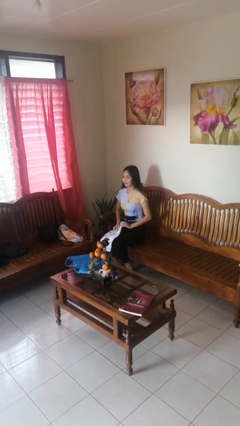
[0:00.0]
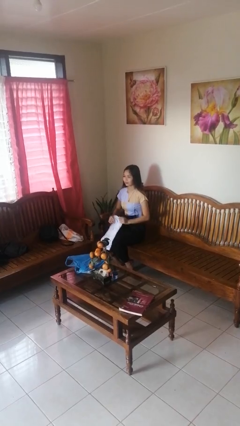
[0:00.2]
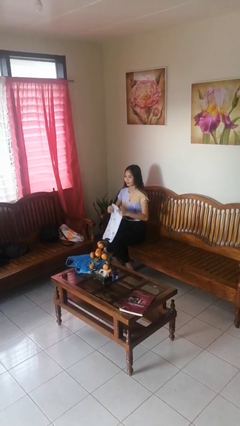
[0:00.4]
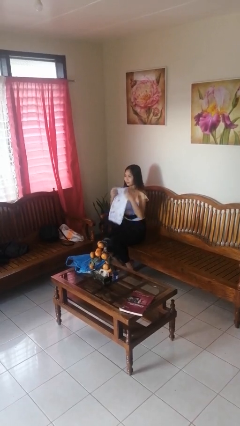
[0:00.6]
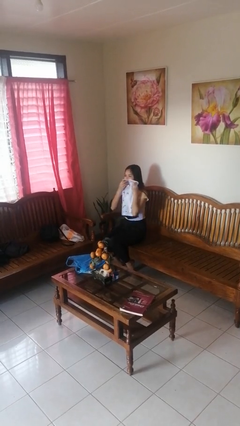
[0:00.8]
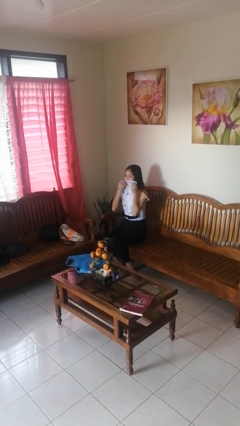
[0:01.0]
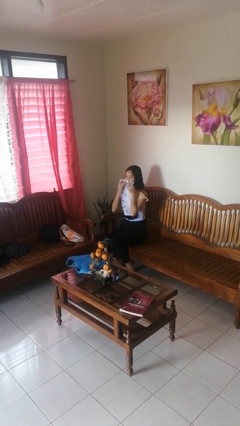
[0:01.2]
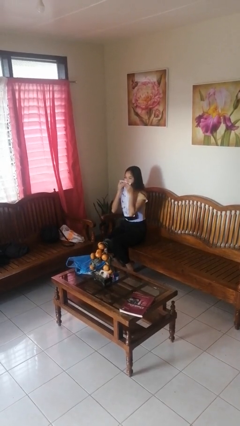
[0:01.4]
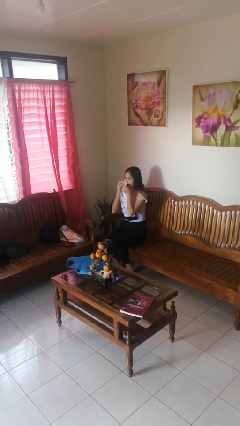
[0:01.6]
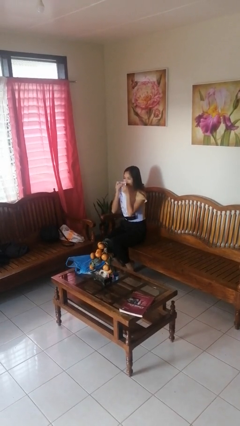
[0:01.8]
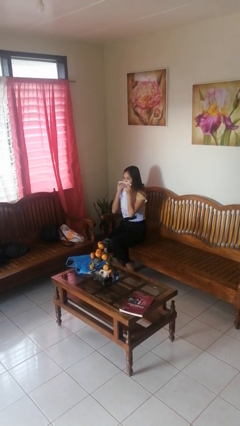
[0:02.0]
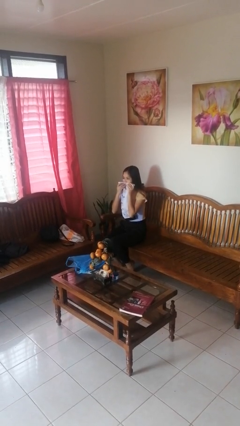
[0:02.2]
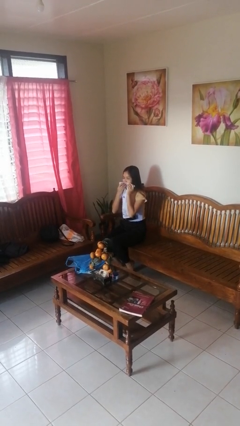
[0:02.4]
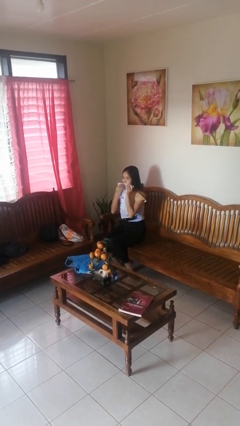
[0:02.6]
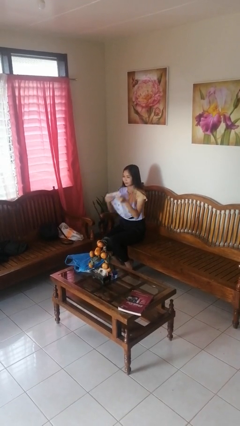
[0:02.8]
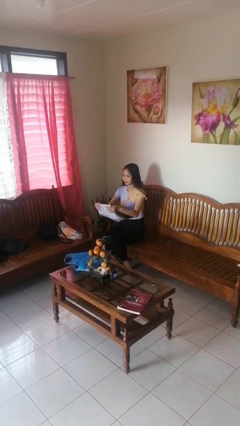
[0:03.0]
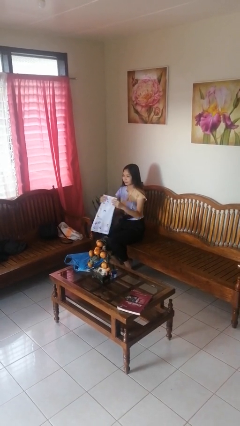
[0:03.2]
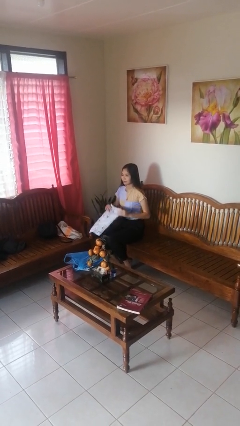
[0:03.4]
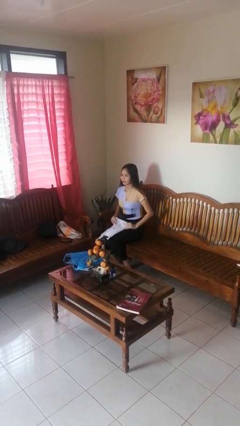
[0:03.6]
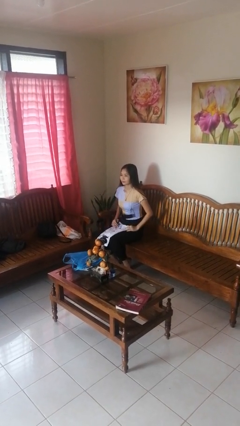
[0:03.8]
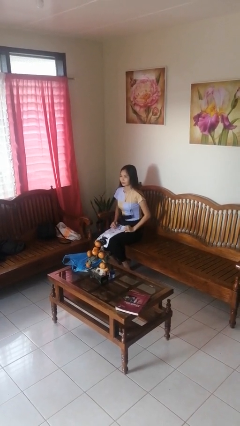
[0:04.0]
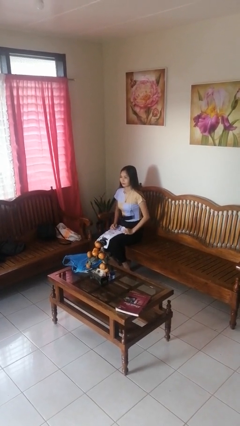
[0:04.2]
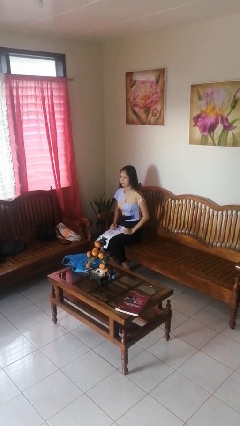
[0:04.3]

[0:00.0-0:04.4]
person wipes mouth with napkin

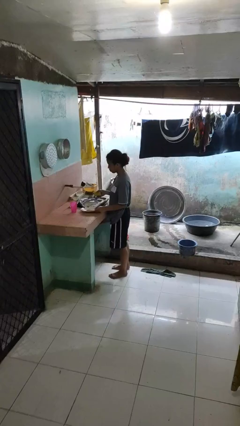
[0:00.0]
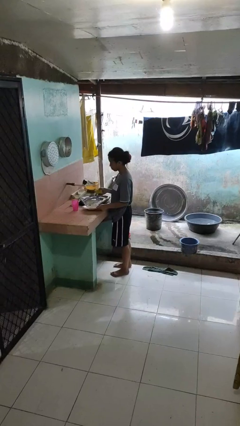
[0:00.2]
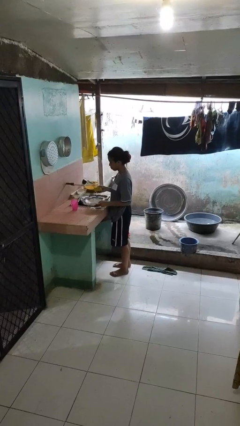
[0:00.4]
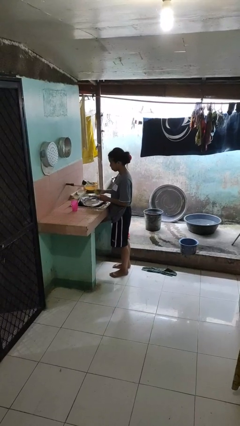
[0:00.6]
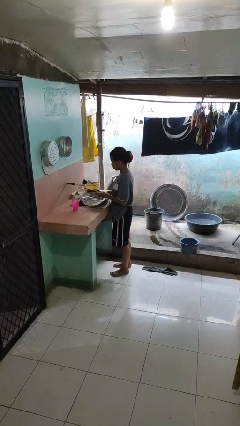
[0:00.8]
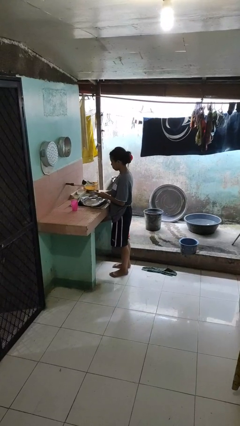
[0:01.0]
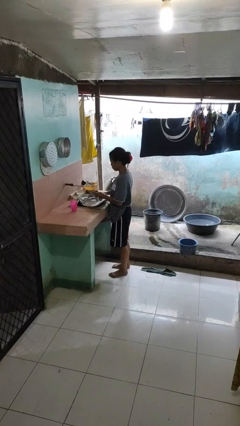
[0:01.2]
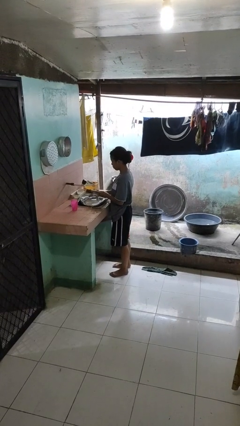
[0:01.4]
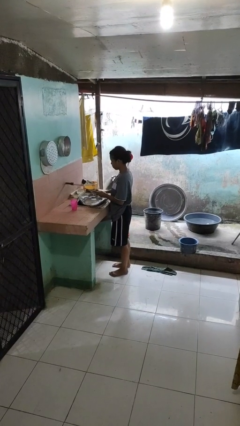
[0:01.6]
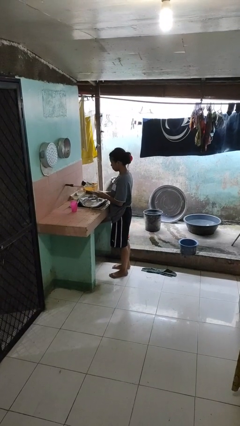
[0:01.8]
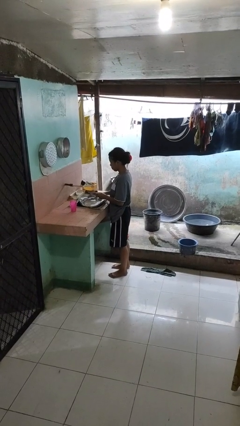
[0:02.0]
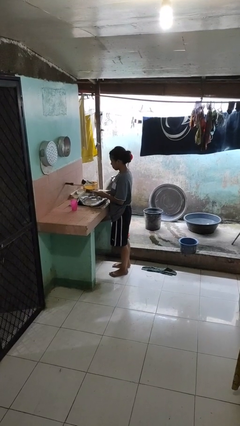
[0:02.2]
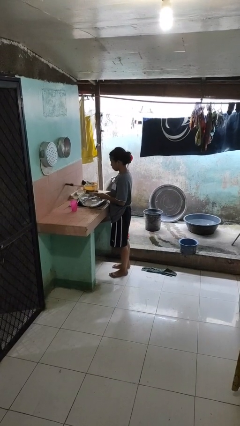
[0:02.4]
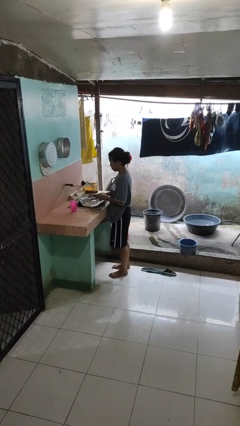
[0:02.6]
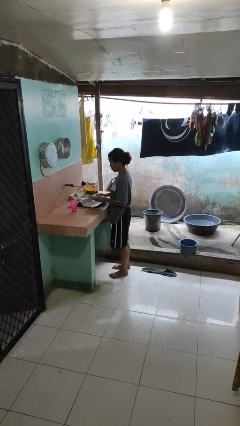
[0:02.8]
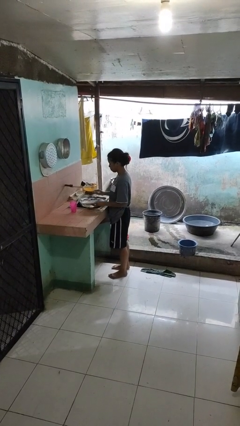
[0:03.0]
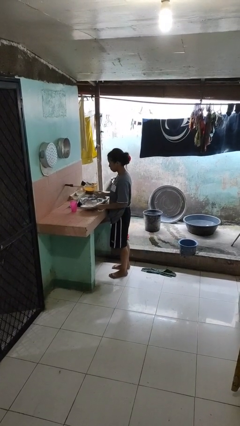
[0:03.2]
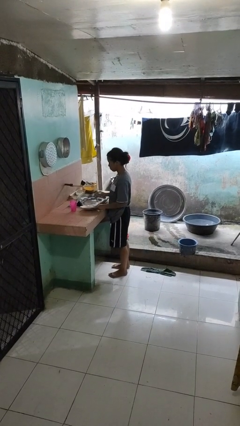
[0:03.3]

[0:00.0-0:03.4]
person washes dish

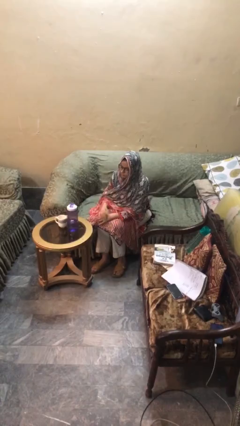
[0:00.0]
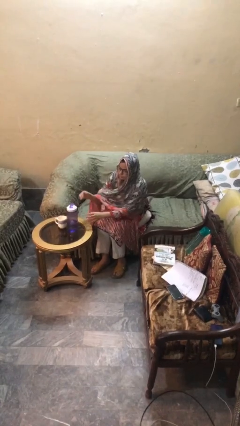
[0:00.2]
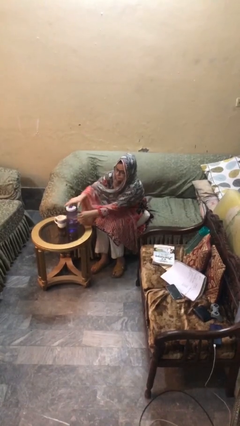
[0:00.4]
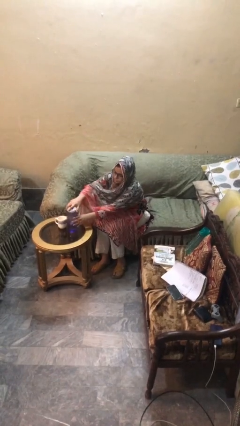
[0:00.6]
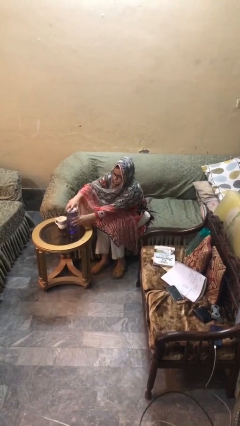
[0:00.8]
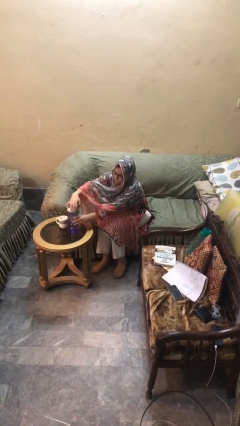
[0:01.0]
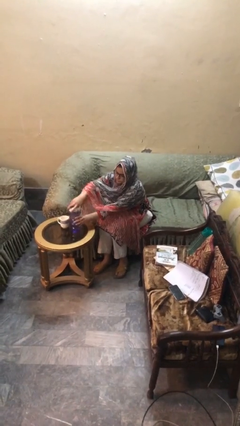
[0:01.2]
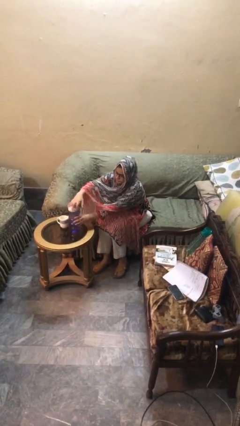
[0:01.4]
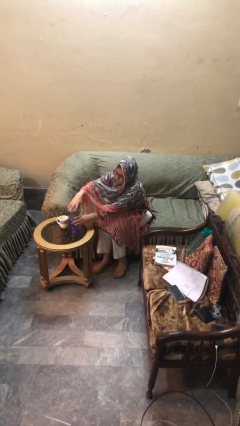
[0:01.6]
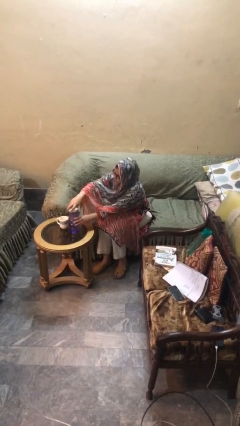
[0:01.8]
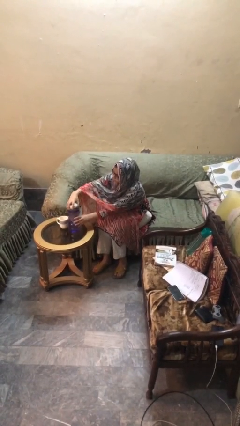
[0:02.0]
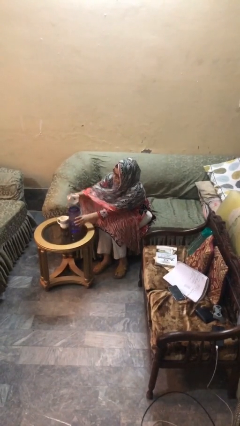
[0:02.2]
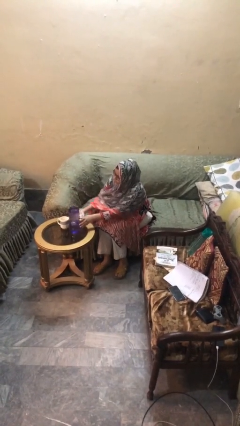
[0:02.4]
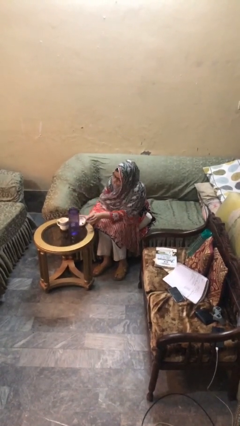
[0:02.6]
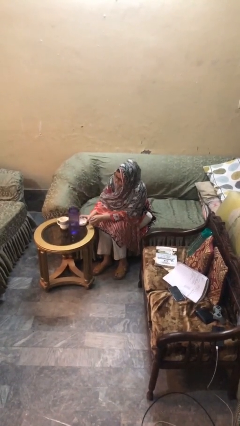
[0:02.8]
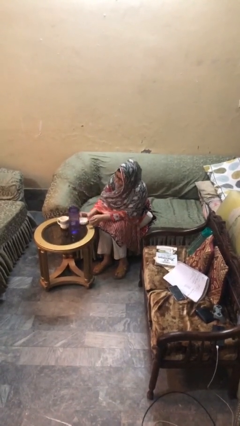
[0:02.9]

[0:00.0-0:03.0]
person unscrews lid from bottle

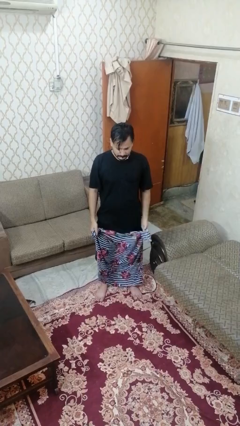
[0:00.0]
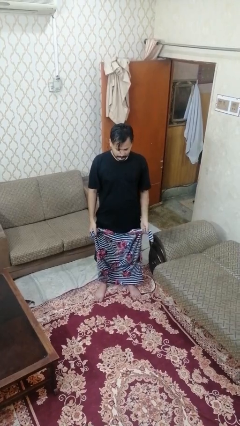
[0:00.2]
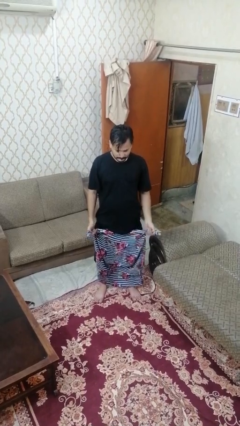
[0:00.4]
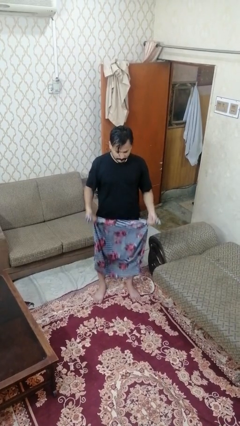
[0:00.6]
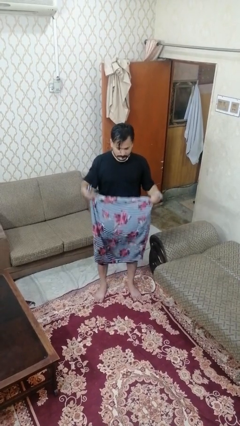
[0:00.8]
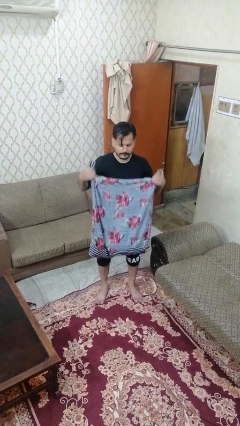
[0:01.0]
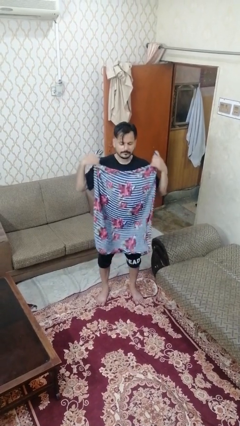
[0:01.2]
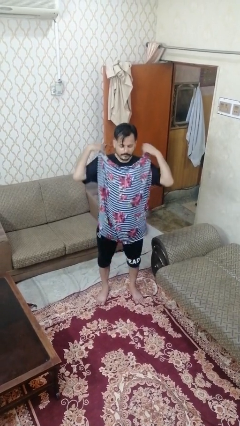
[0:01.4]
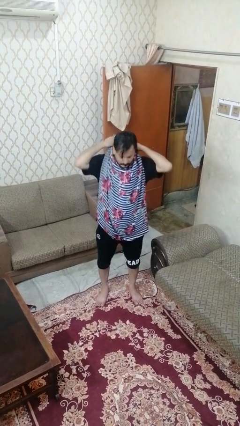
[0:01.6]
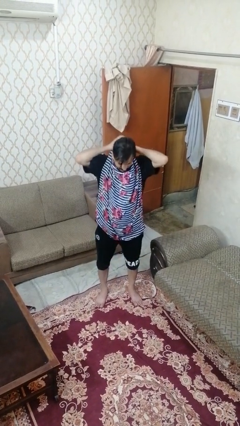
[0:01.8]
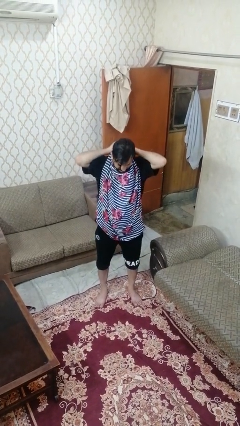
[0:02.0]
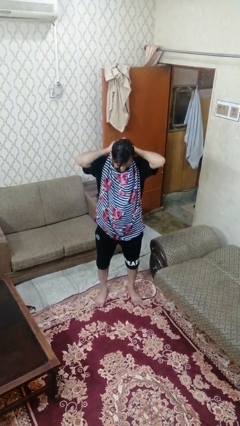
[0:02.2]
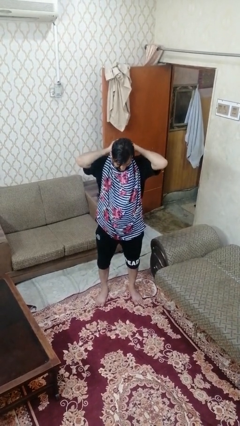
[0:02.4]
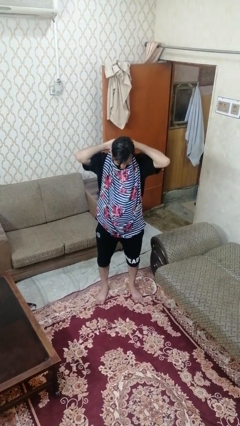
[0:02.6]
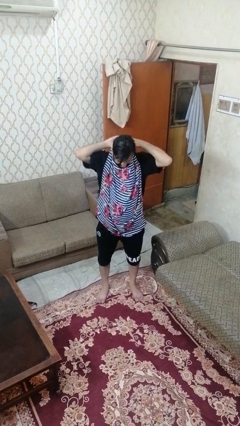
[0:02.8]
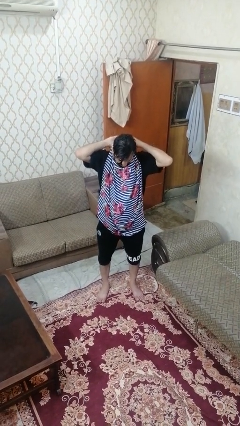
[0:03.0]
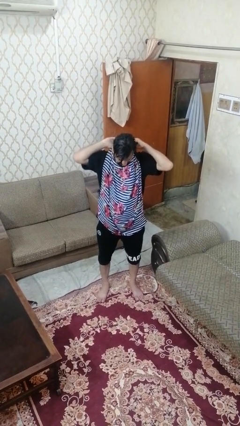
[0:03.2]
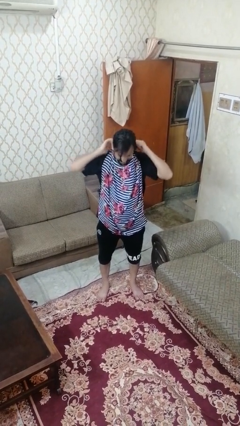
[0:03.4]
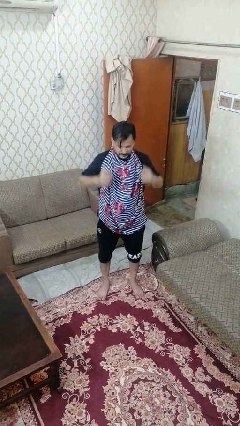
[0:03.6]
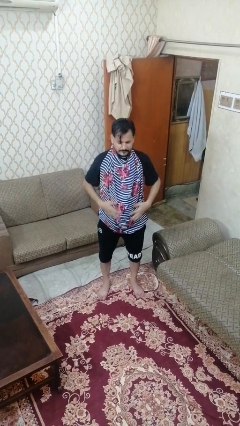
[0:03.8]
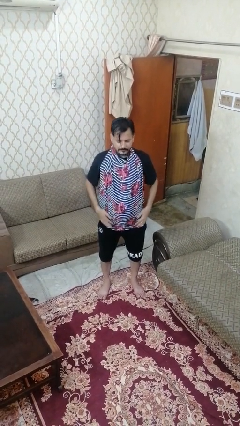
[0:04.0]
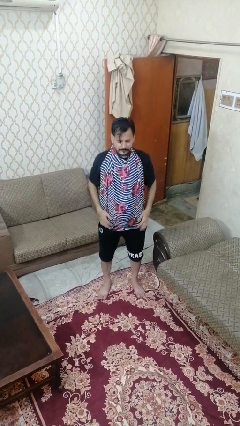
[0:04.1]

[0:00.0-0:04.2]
person puts on apron

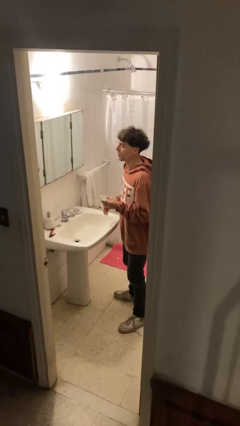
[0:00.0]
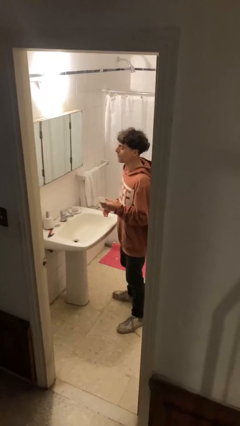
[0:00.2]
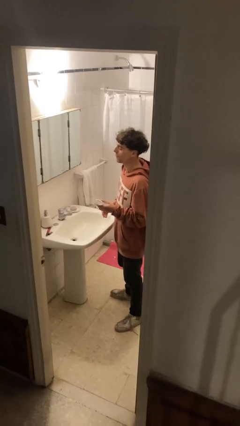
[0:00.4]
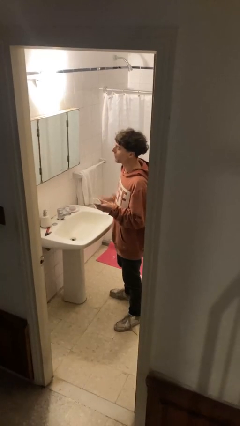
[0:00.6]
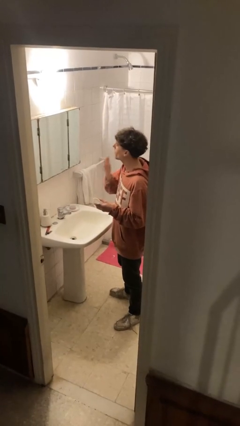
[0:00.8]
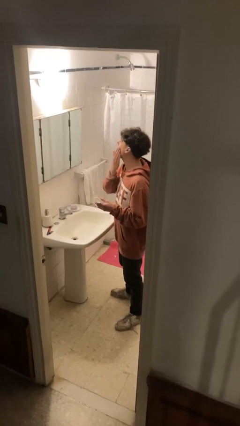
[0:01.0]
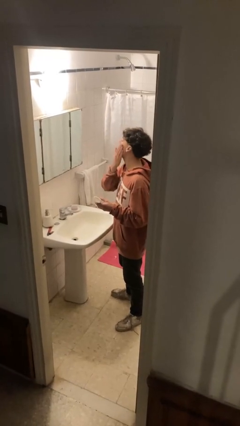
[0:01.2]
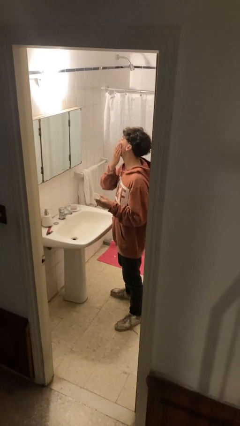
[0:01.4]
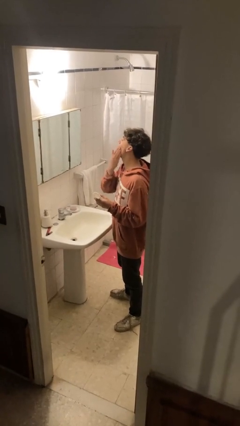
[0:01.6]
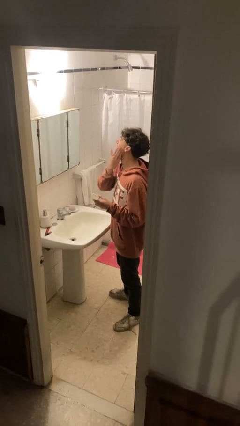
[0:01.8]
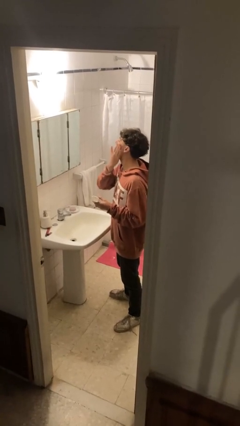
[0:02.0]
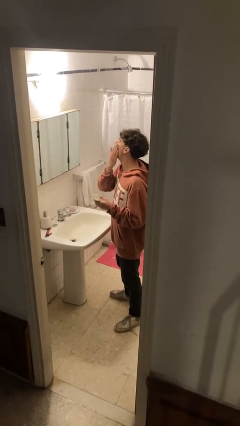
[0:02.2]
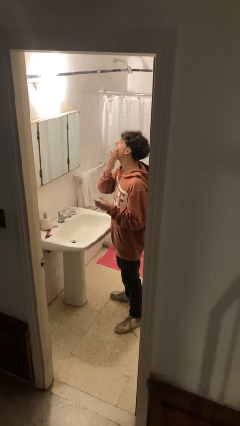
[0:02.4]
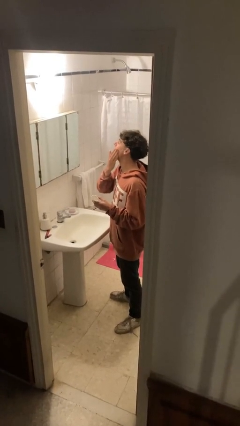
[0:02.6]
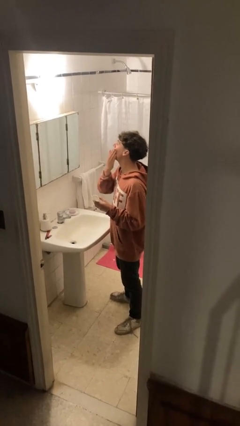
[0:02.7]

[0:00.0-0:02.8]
person applies foundation makeup
